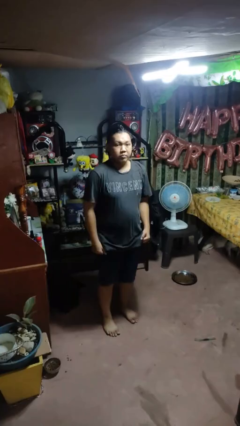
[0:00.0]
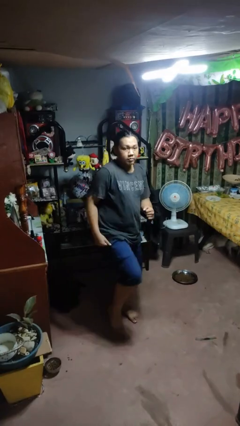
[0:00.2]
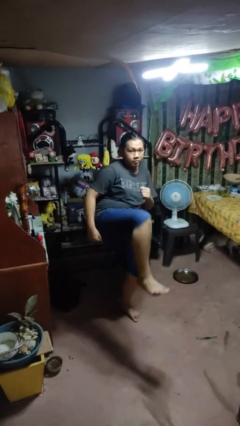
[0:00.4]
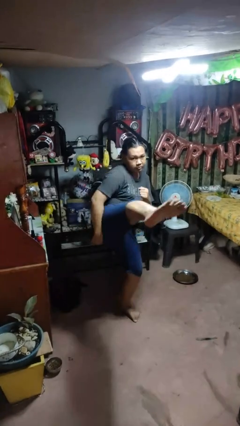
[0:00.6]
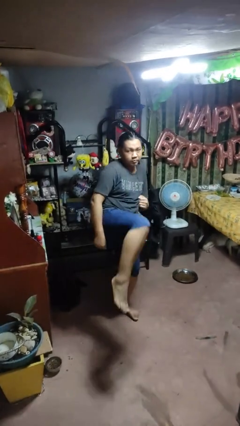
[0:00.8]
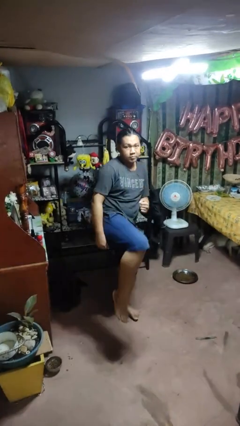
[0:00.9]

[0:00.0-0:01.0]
person karate kicks

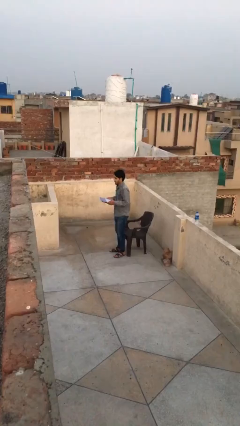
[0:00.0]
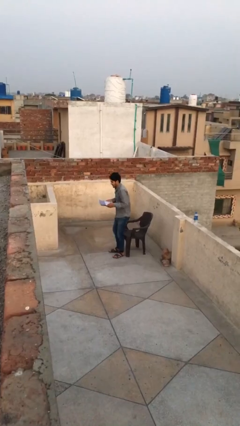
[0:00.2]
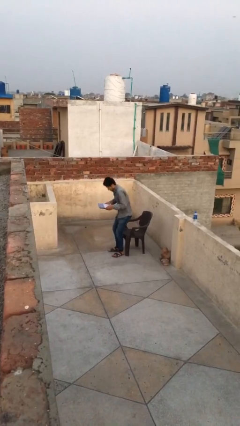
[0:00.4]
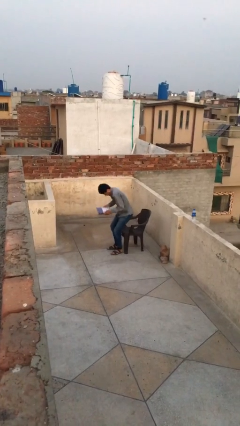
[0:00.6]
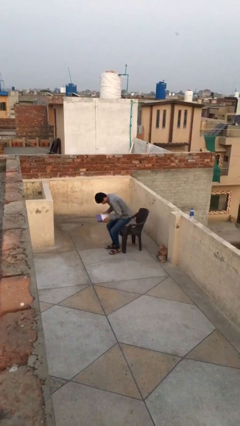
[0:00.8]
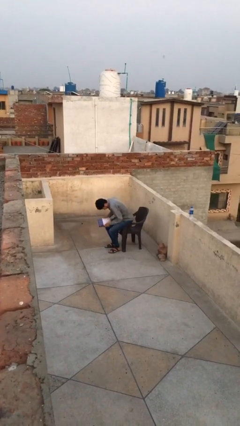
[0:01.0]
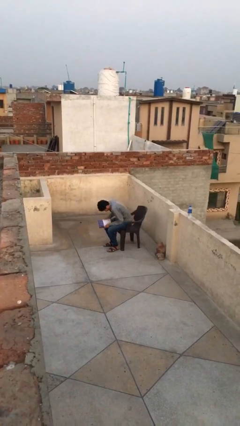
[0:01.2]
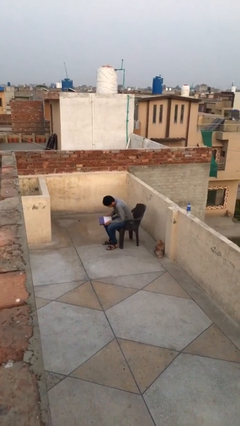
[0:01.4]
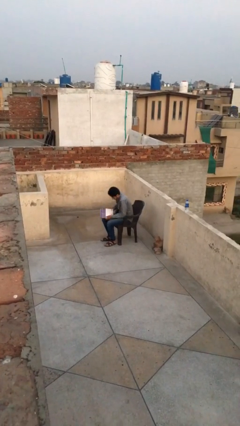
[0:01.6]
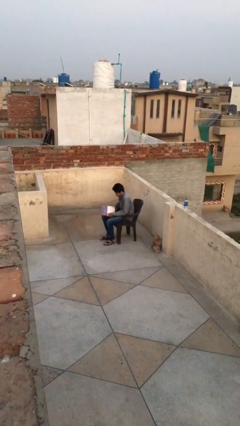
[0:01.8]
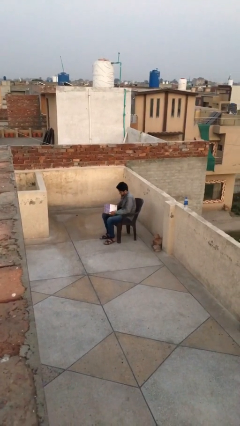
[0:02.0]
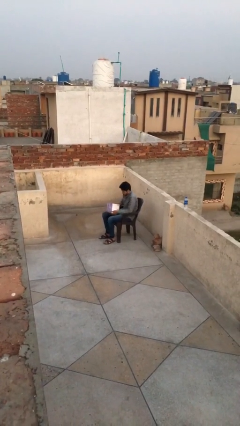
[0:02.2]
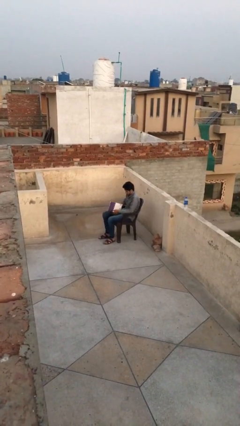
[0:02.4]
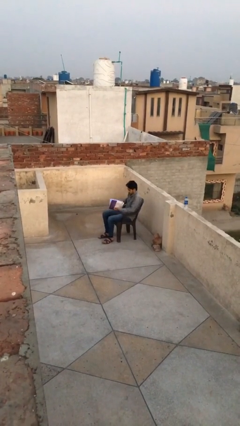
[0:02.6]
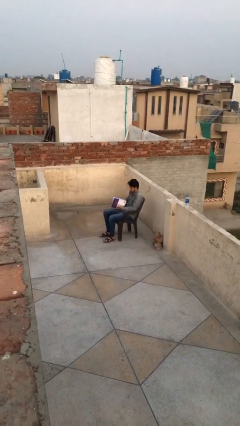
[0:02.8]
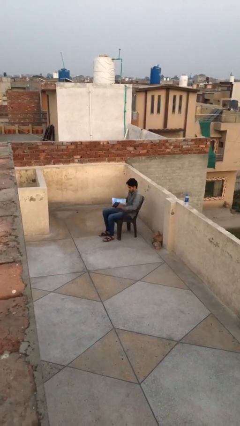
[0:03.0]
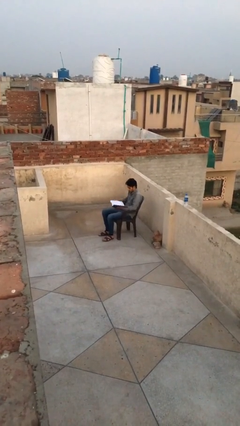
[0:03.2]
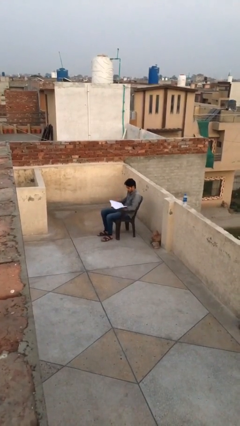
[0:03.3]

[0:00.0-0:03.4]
person sits down

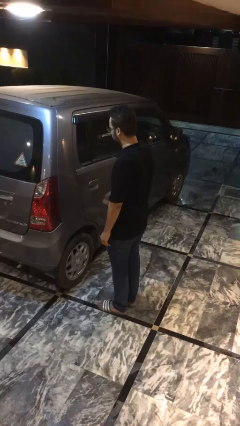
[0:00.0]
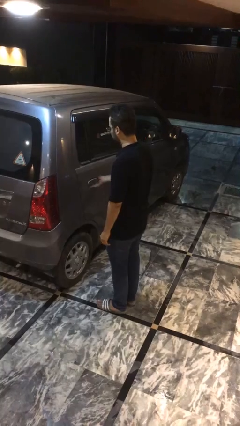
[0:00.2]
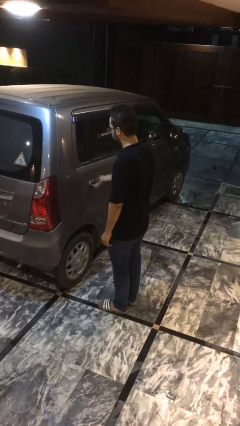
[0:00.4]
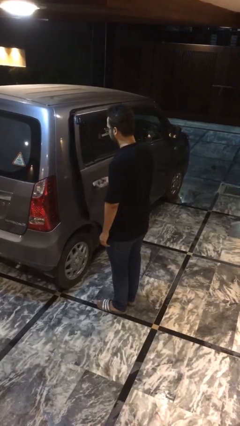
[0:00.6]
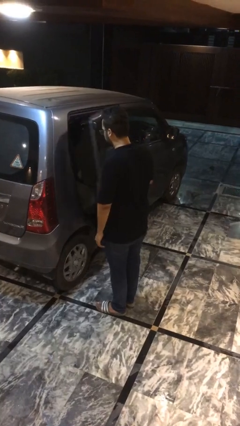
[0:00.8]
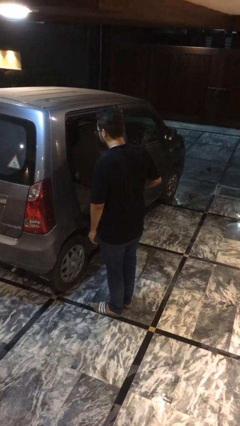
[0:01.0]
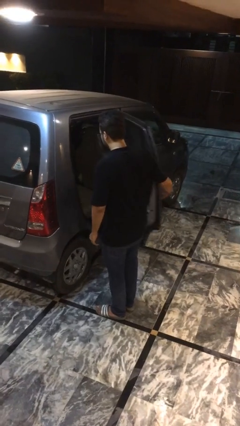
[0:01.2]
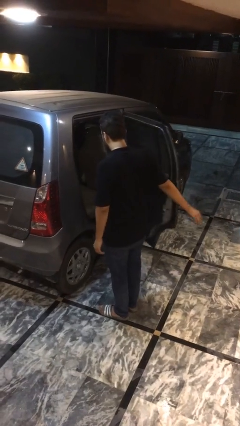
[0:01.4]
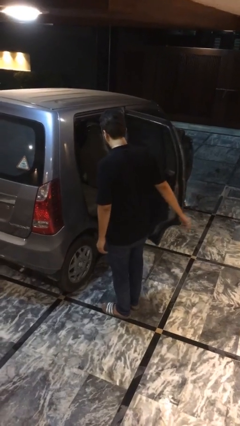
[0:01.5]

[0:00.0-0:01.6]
person opens car door

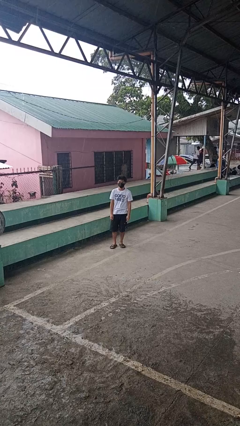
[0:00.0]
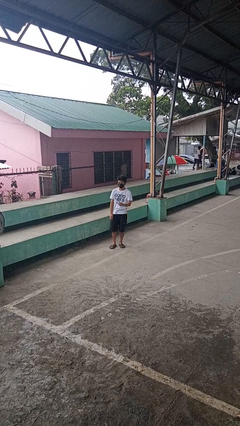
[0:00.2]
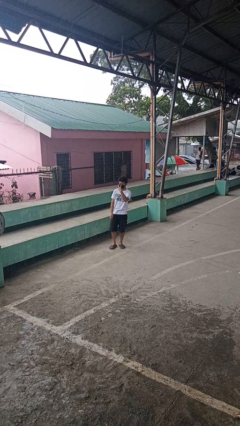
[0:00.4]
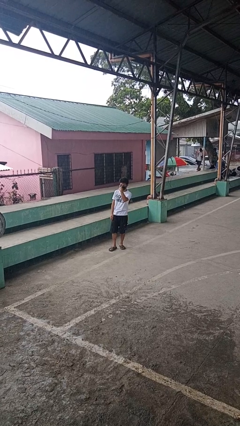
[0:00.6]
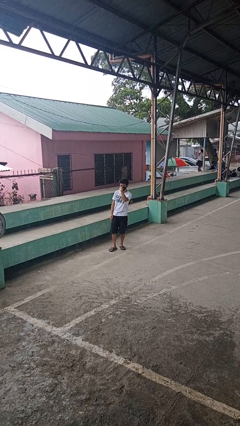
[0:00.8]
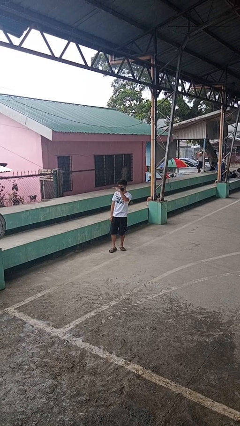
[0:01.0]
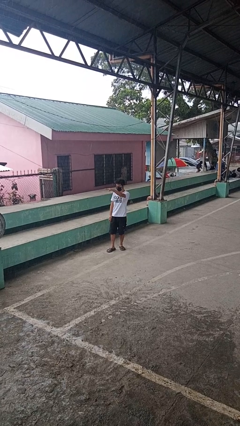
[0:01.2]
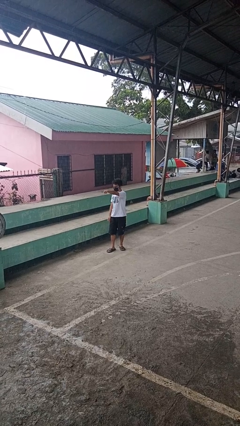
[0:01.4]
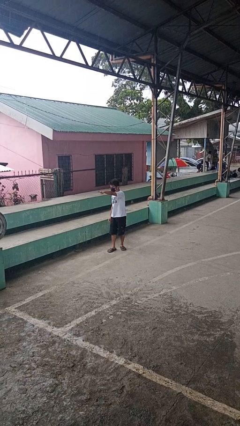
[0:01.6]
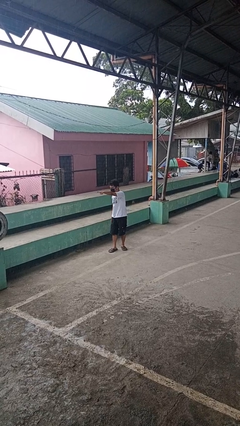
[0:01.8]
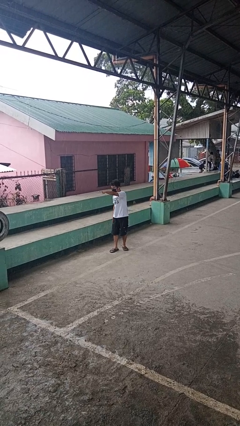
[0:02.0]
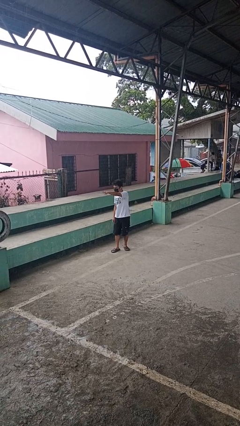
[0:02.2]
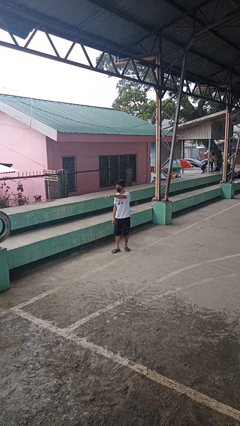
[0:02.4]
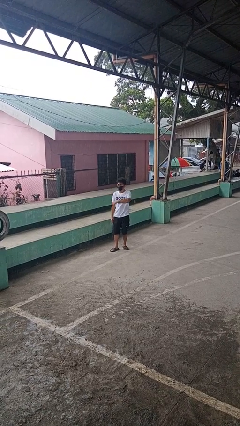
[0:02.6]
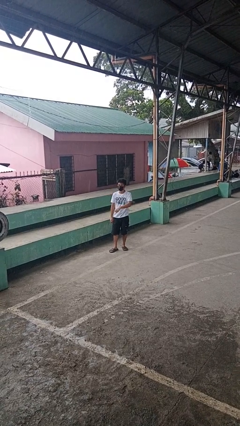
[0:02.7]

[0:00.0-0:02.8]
person gestures watch closely

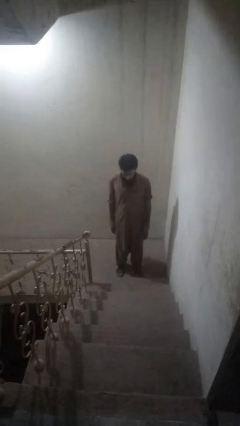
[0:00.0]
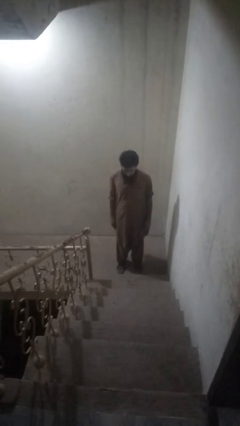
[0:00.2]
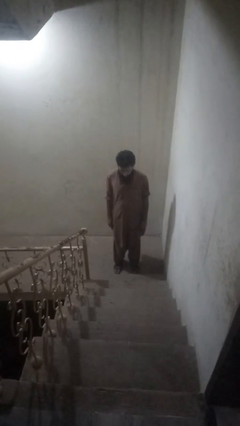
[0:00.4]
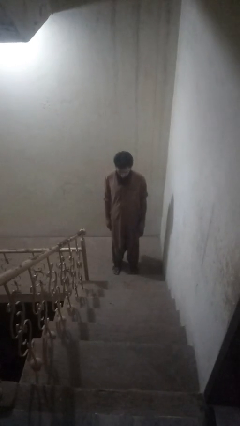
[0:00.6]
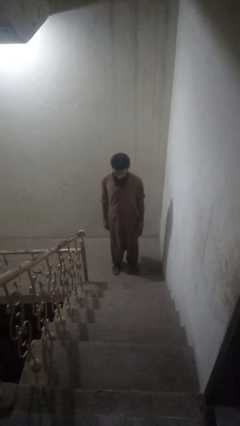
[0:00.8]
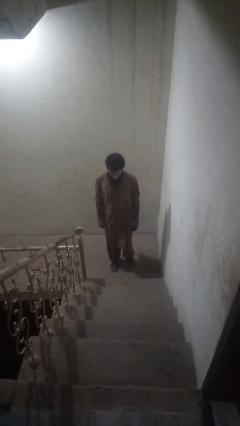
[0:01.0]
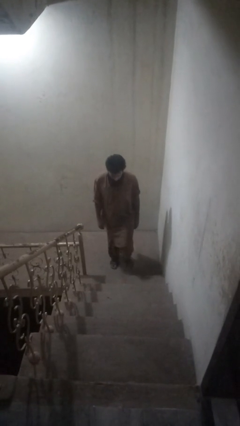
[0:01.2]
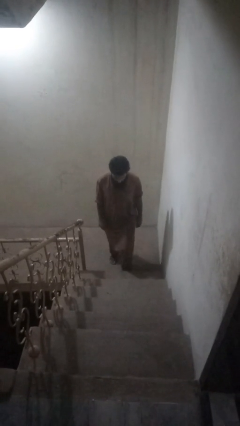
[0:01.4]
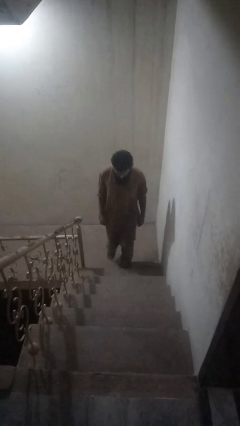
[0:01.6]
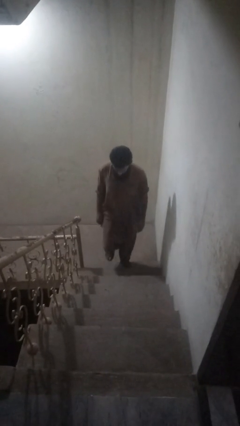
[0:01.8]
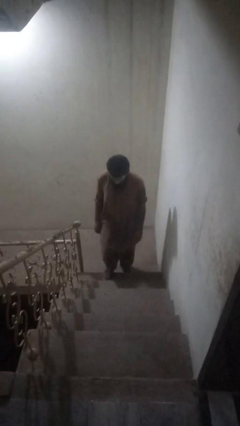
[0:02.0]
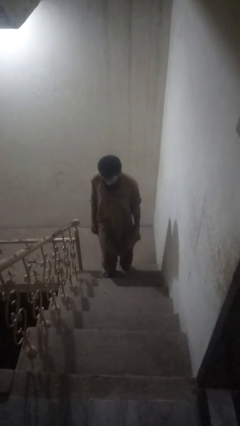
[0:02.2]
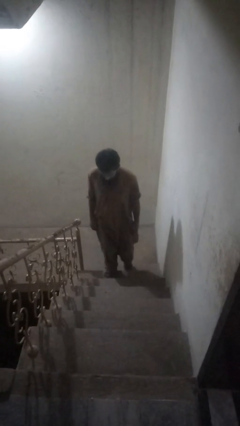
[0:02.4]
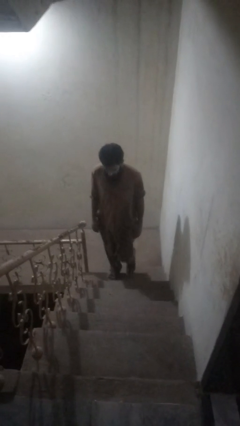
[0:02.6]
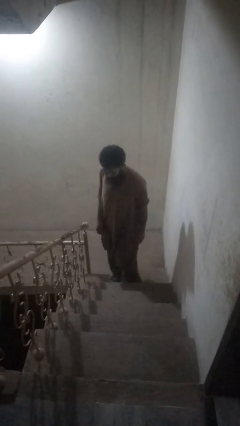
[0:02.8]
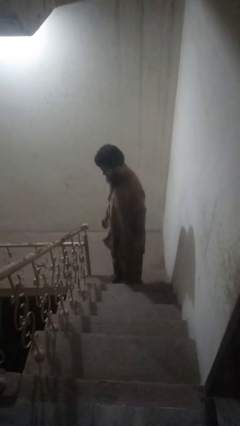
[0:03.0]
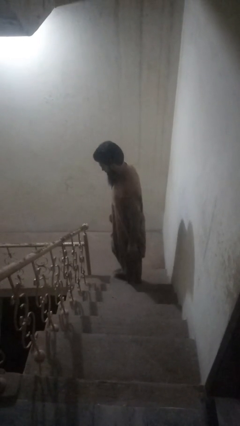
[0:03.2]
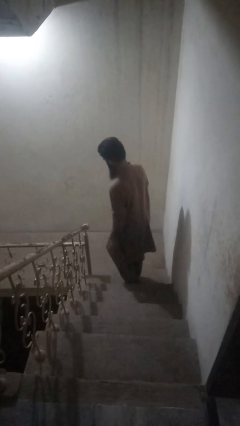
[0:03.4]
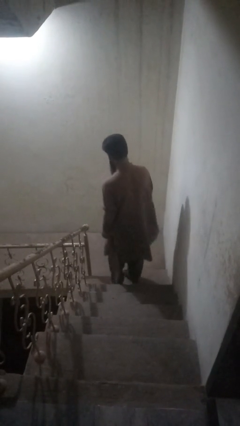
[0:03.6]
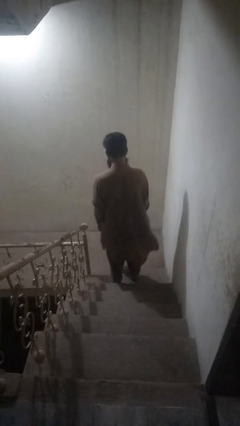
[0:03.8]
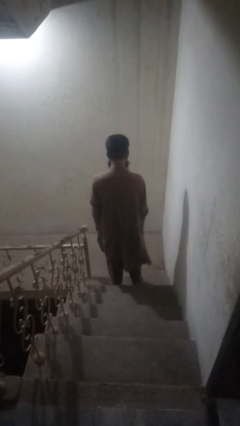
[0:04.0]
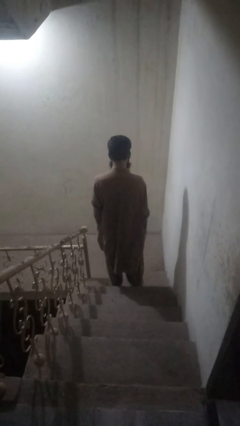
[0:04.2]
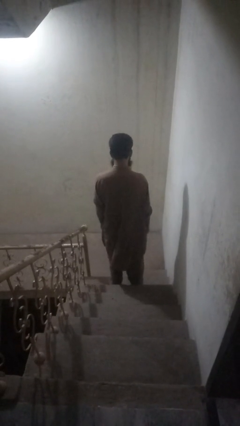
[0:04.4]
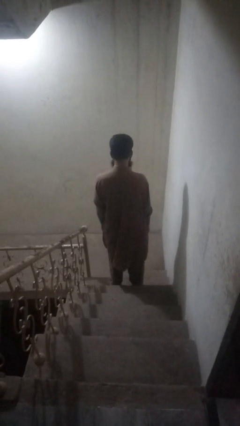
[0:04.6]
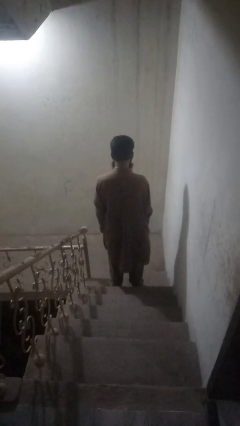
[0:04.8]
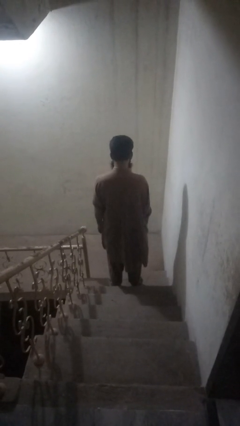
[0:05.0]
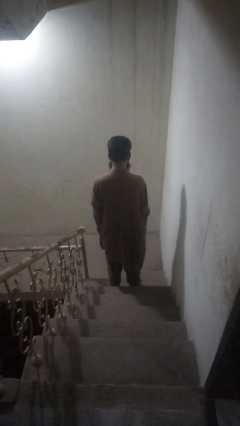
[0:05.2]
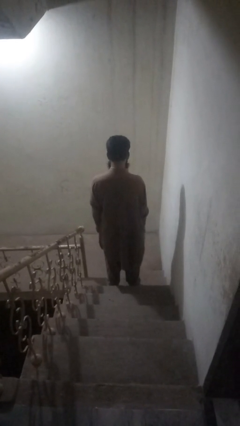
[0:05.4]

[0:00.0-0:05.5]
person climbs up stairs

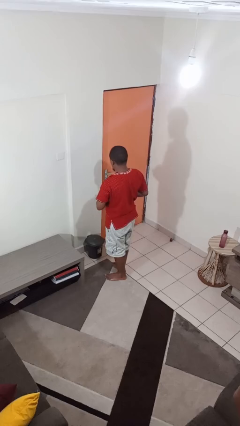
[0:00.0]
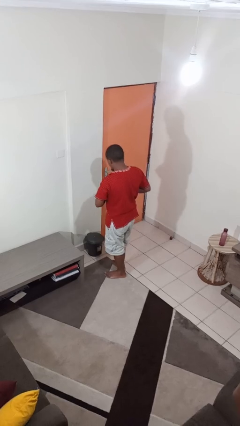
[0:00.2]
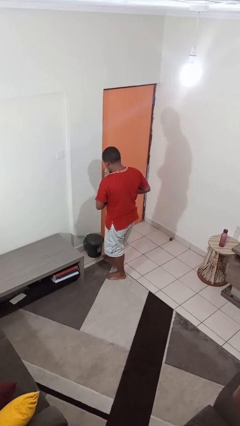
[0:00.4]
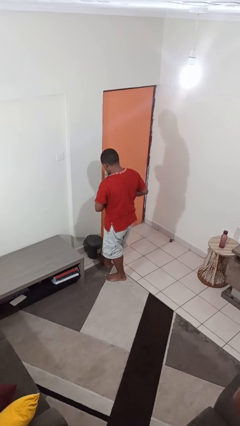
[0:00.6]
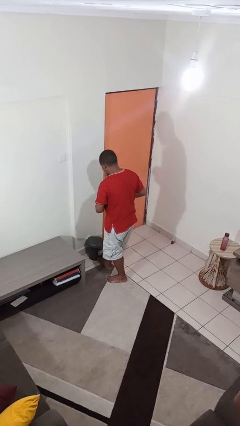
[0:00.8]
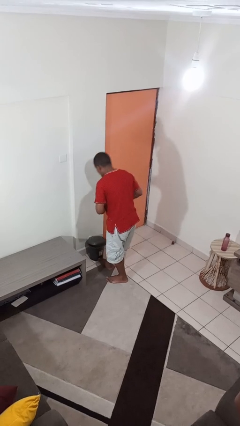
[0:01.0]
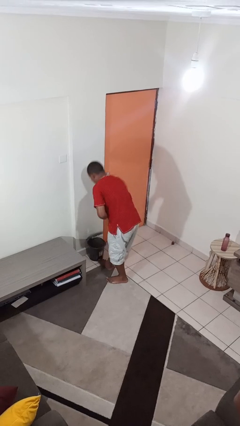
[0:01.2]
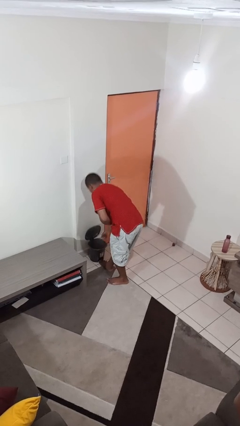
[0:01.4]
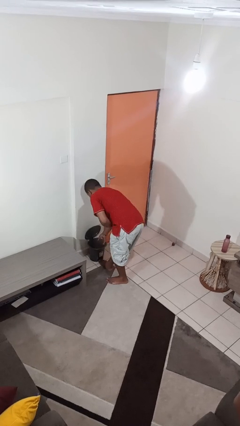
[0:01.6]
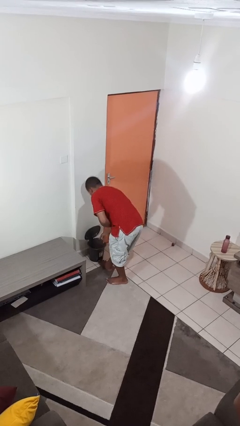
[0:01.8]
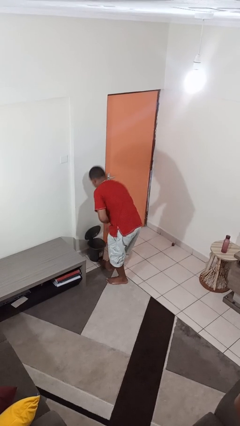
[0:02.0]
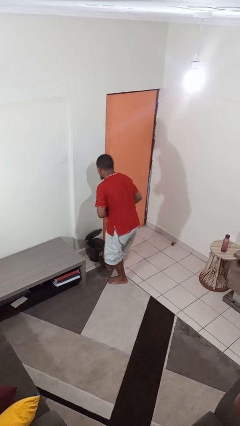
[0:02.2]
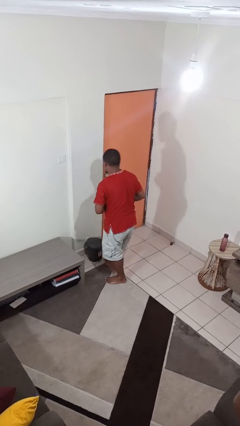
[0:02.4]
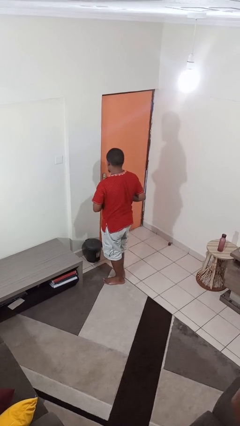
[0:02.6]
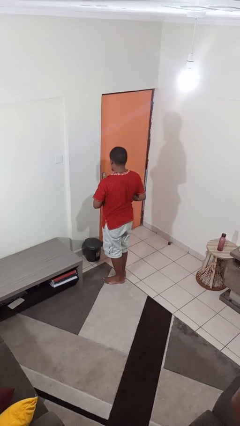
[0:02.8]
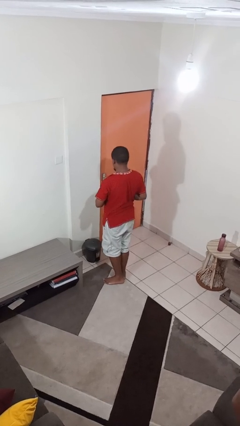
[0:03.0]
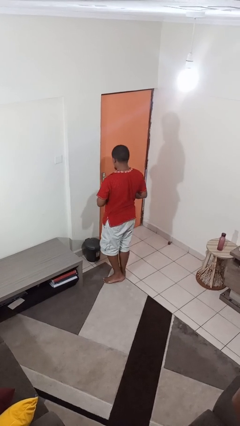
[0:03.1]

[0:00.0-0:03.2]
person discards trash
